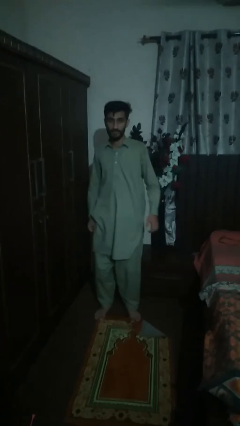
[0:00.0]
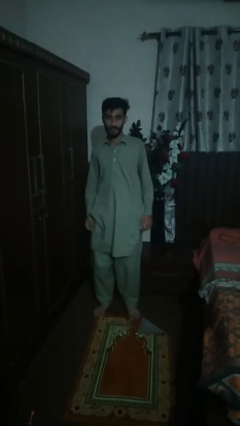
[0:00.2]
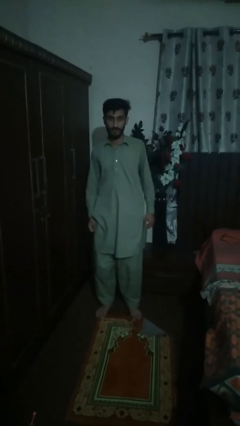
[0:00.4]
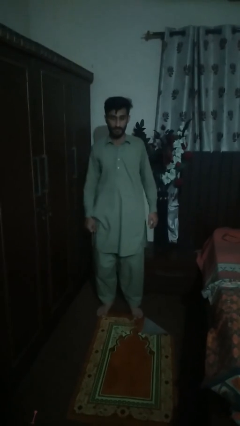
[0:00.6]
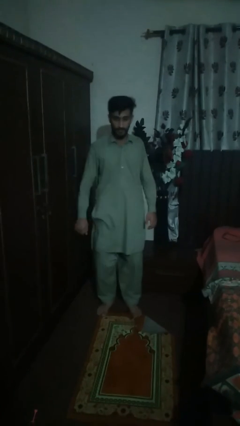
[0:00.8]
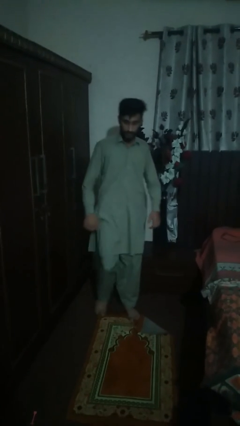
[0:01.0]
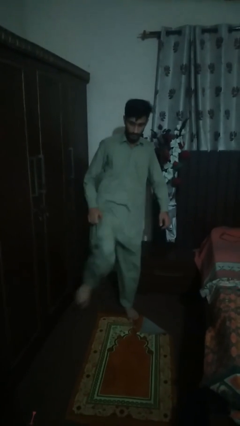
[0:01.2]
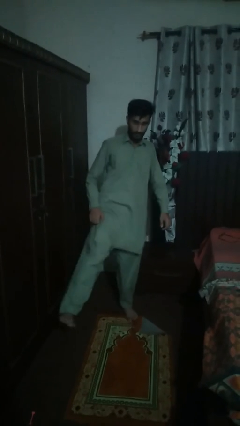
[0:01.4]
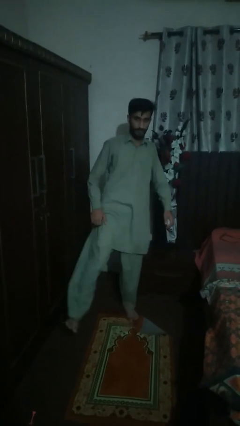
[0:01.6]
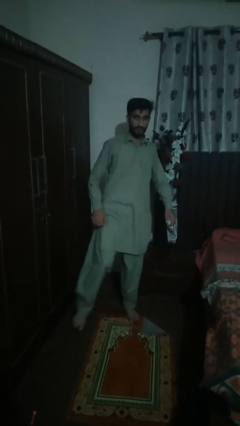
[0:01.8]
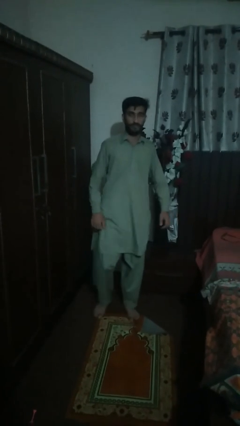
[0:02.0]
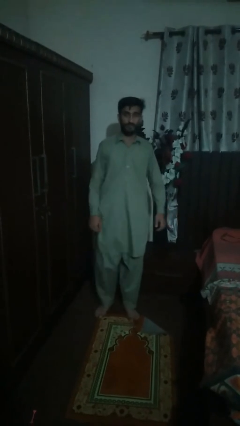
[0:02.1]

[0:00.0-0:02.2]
person karate kicks

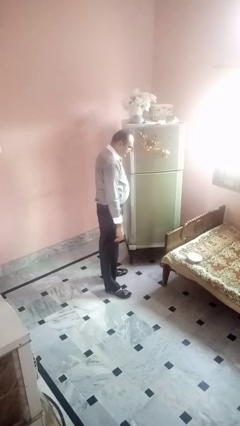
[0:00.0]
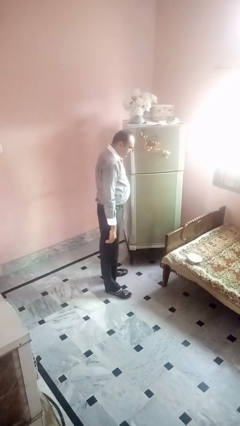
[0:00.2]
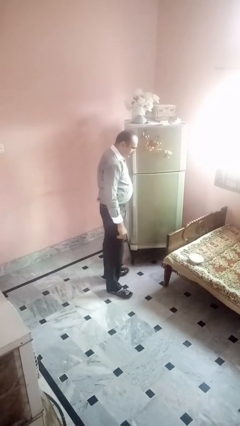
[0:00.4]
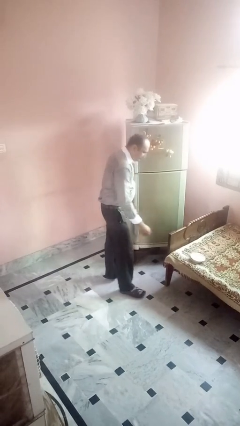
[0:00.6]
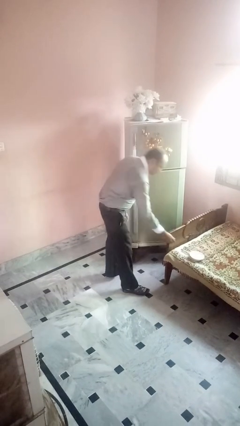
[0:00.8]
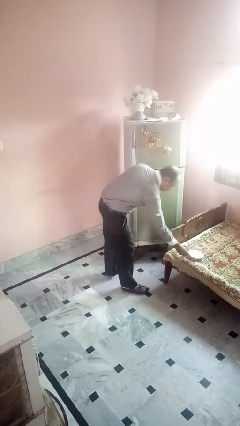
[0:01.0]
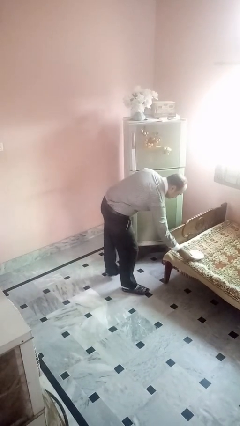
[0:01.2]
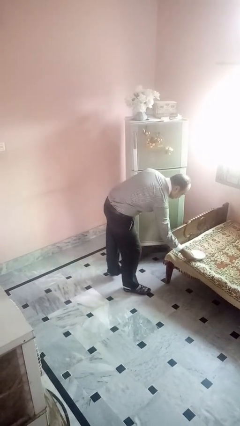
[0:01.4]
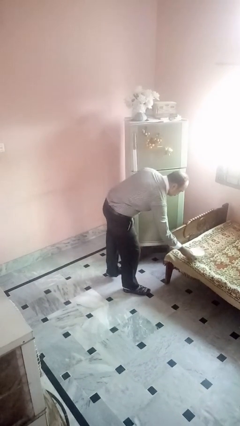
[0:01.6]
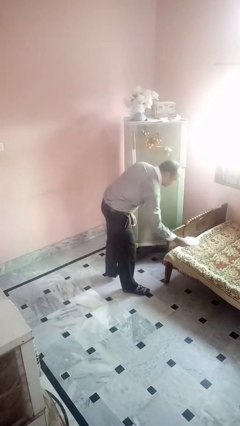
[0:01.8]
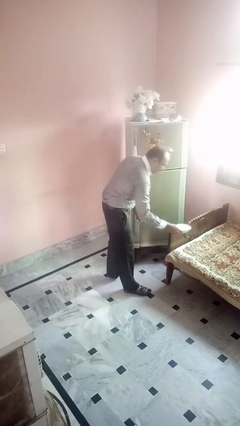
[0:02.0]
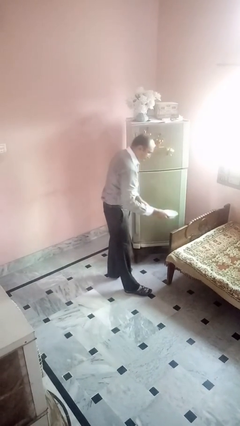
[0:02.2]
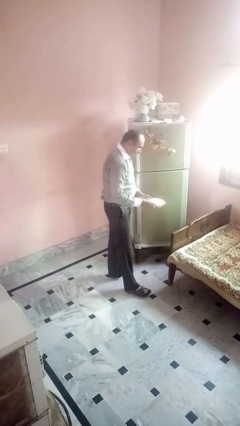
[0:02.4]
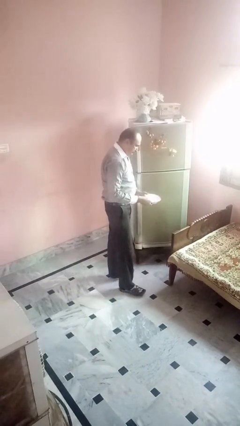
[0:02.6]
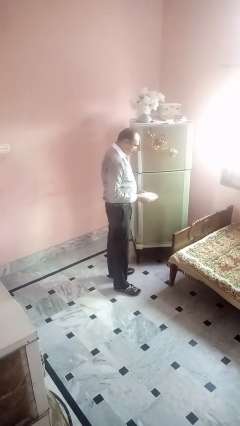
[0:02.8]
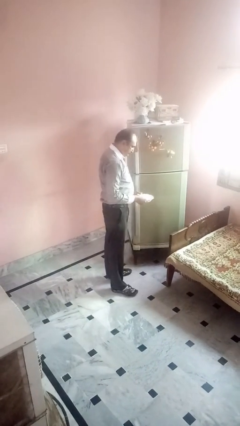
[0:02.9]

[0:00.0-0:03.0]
person takes object from refrigerator

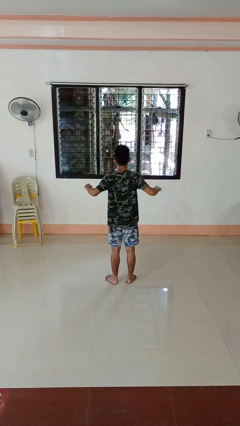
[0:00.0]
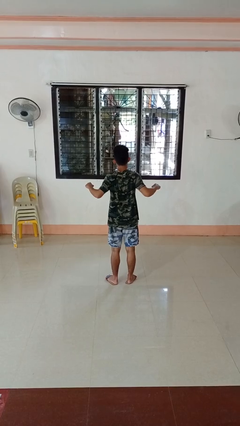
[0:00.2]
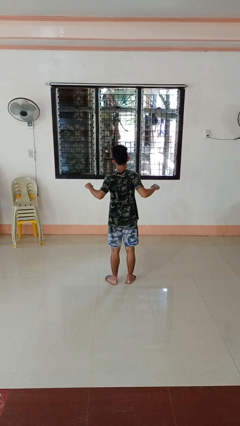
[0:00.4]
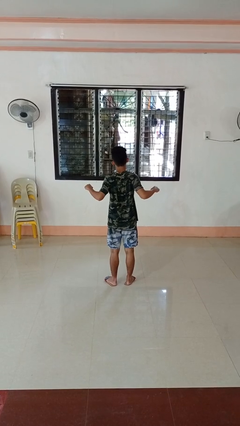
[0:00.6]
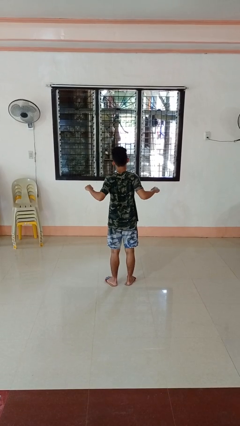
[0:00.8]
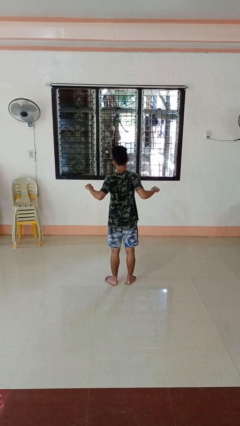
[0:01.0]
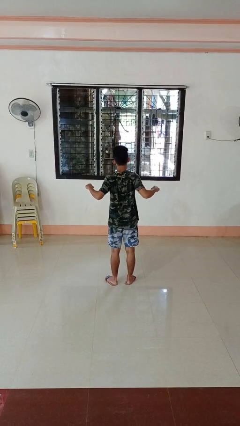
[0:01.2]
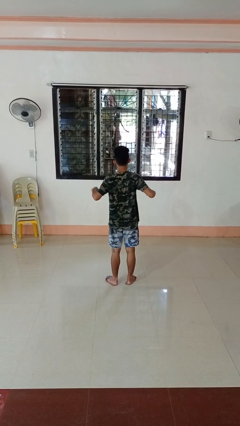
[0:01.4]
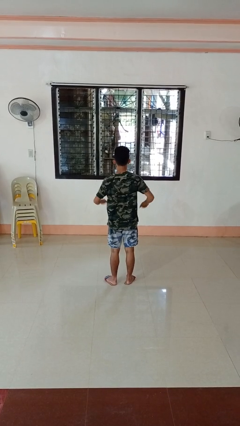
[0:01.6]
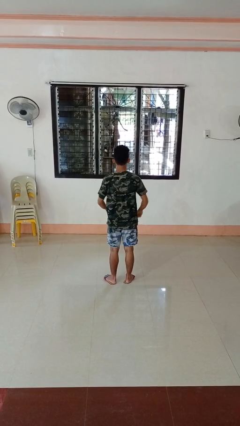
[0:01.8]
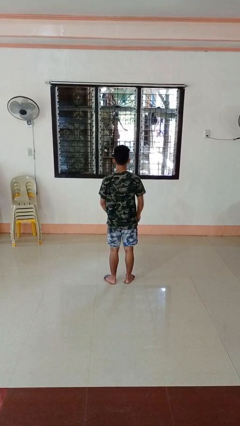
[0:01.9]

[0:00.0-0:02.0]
person stretches back

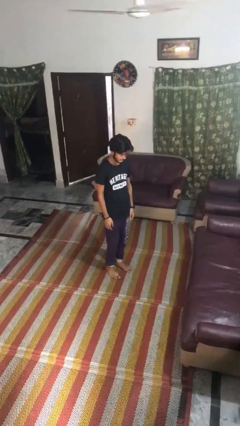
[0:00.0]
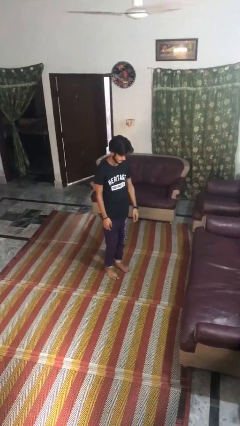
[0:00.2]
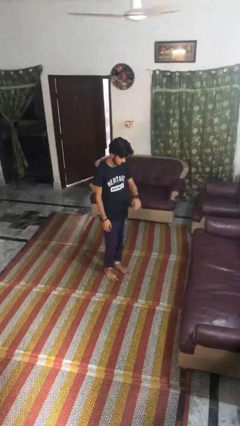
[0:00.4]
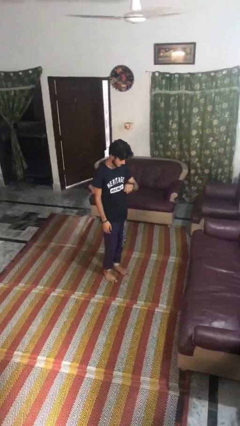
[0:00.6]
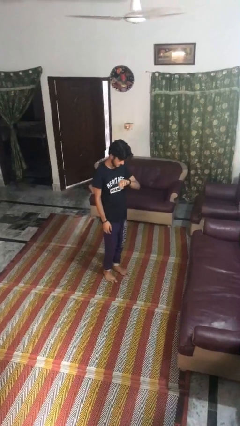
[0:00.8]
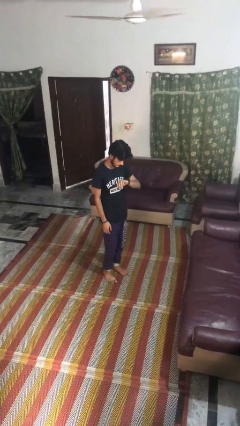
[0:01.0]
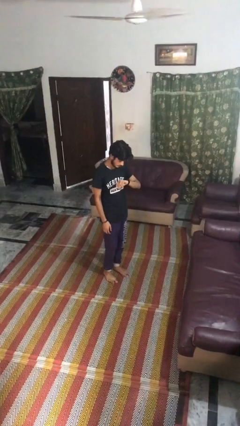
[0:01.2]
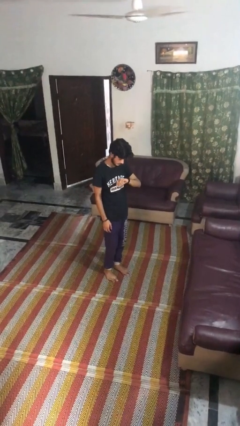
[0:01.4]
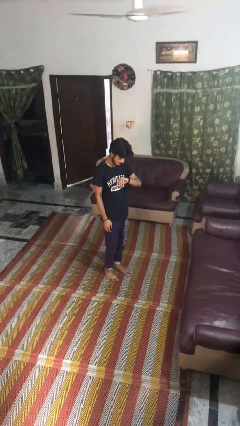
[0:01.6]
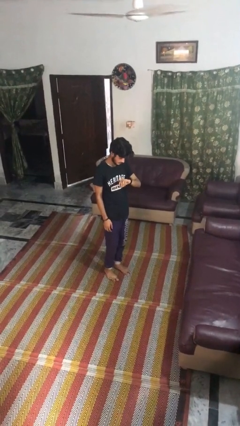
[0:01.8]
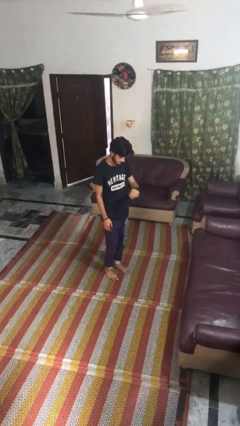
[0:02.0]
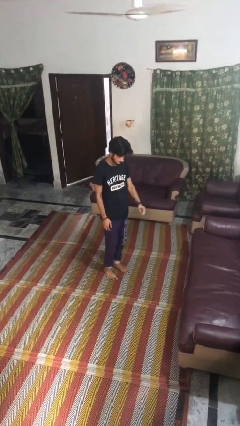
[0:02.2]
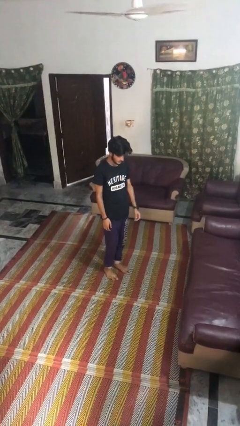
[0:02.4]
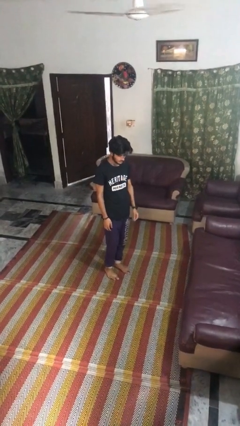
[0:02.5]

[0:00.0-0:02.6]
person looks at wristwatch

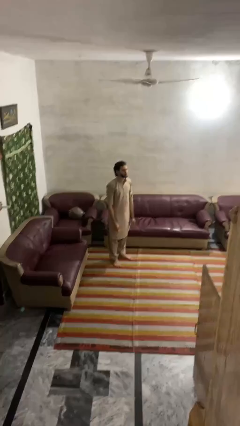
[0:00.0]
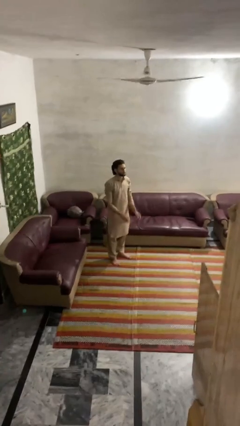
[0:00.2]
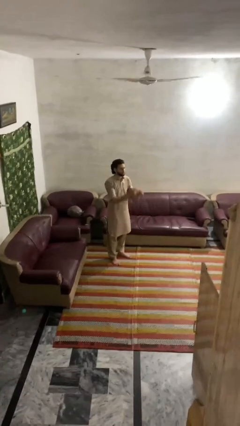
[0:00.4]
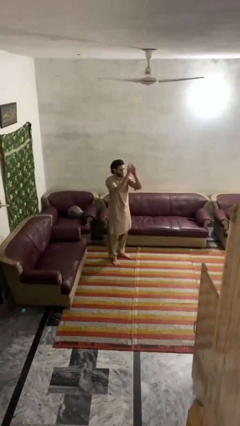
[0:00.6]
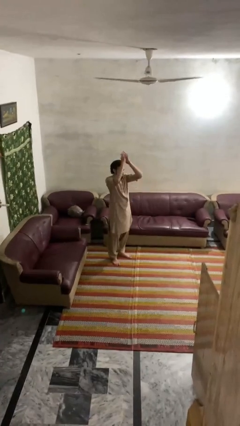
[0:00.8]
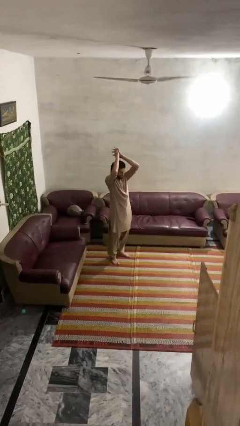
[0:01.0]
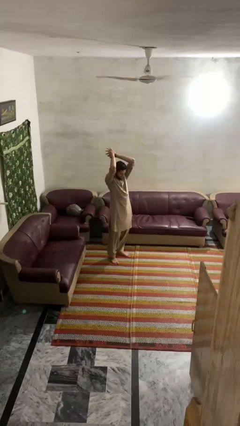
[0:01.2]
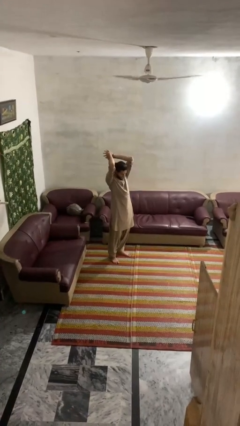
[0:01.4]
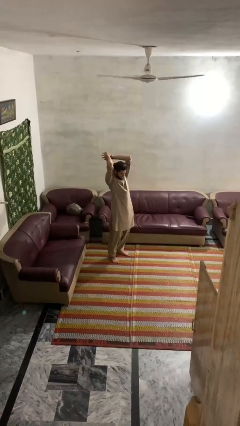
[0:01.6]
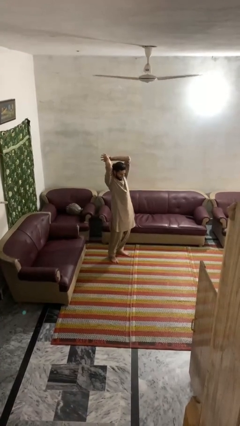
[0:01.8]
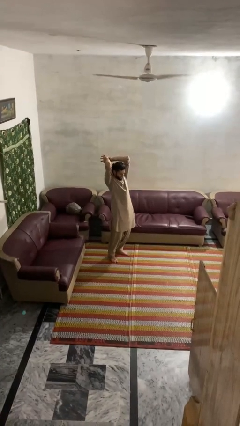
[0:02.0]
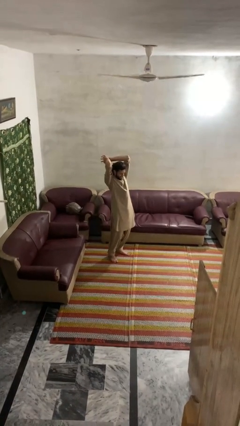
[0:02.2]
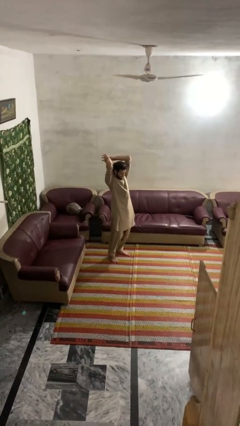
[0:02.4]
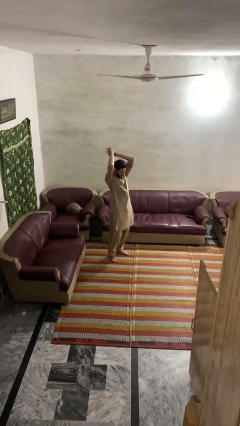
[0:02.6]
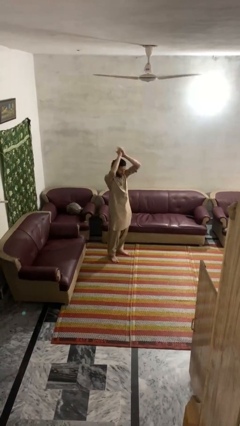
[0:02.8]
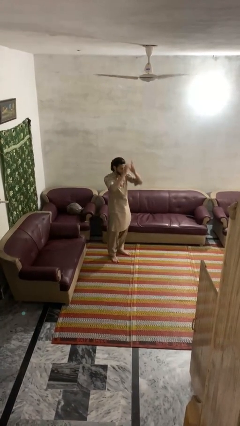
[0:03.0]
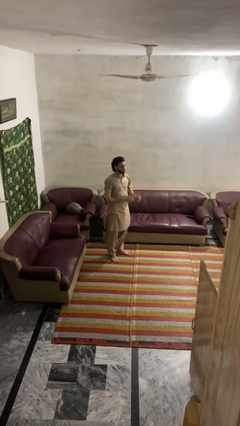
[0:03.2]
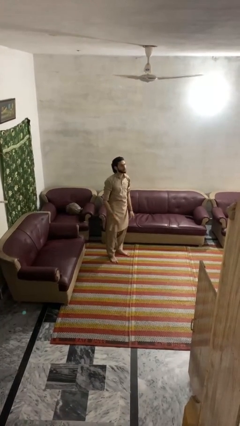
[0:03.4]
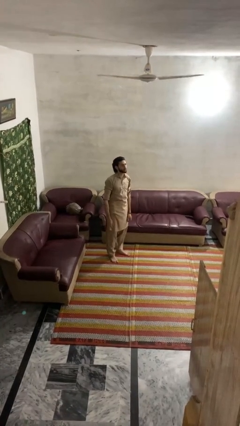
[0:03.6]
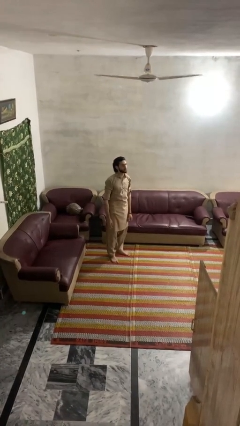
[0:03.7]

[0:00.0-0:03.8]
person stretches arms over head

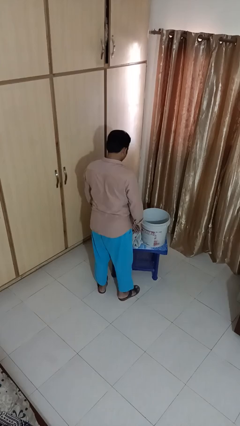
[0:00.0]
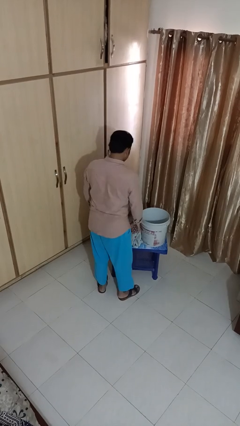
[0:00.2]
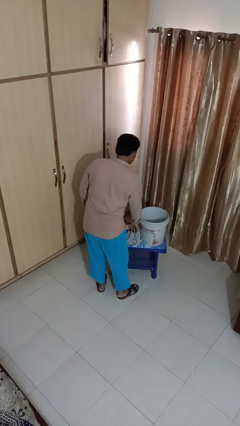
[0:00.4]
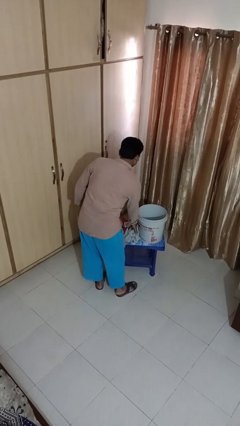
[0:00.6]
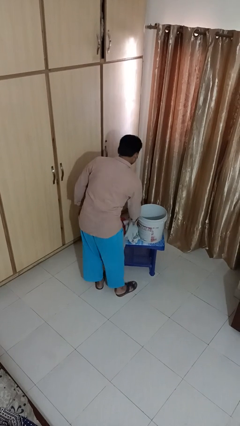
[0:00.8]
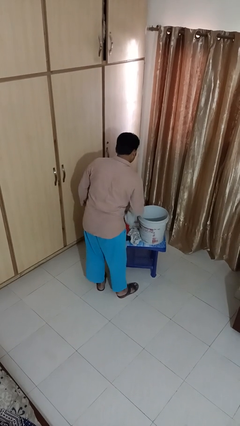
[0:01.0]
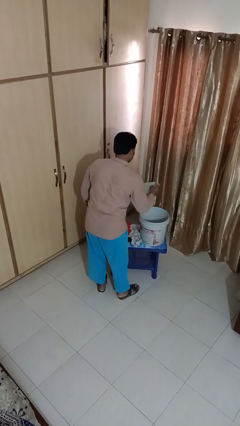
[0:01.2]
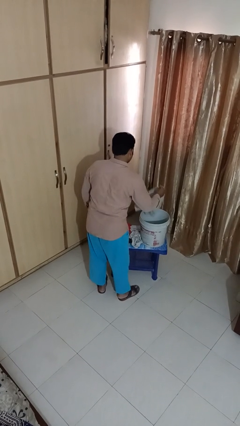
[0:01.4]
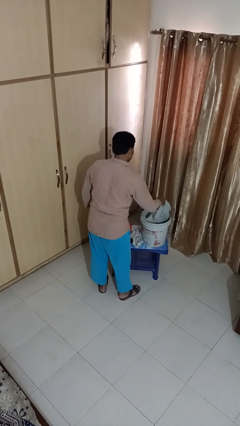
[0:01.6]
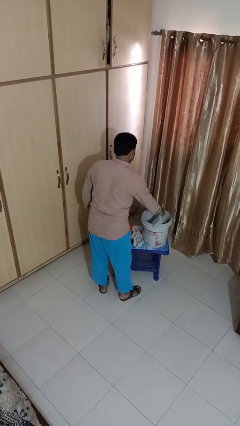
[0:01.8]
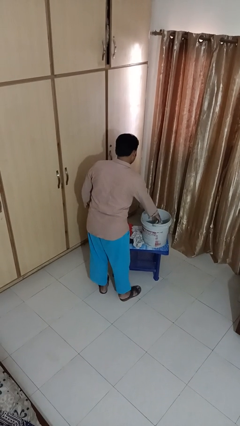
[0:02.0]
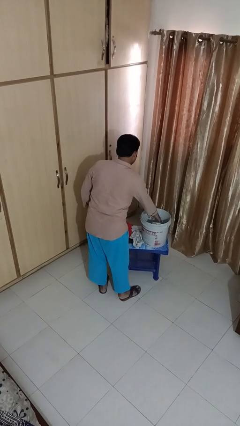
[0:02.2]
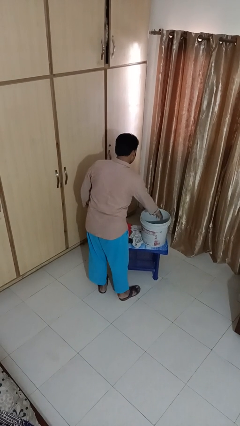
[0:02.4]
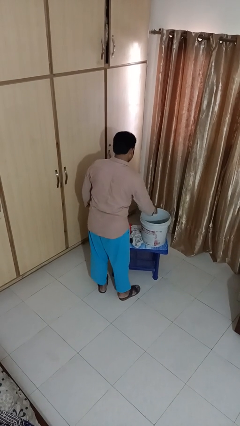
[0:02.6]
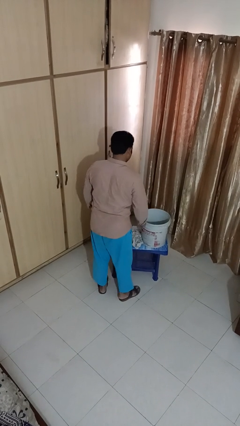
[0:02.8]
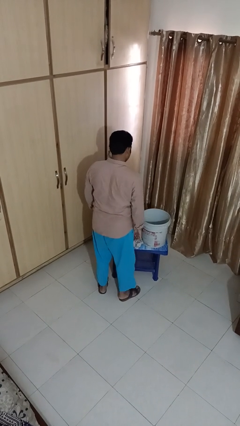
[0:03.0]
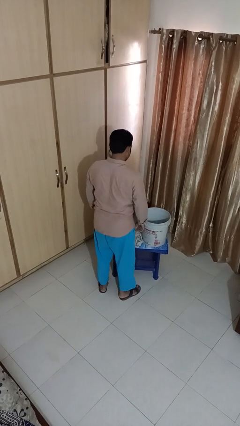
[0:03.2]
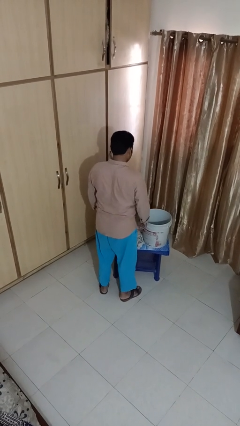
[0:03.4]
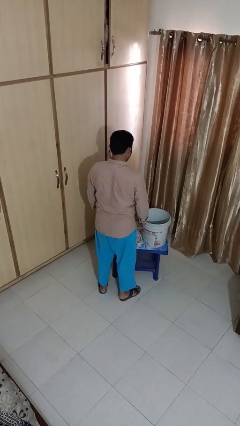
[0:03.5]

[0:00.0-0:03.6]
person puts object into basket
